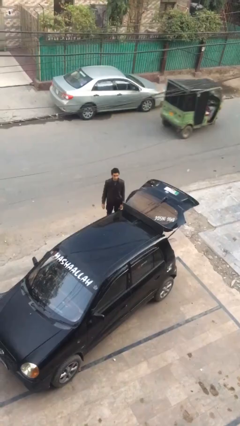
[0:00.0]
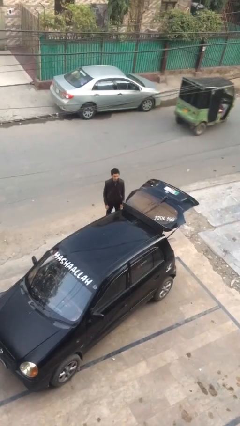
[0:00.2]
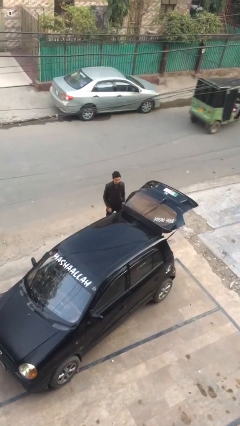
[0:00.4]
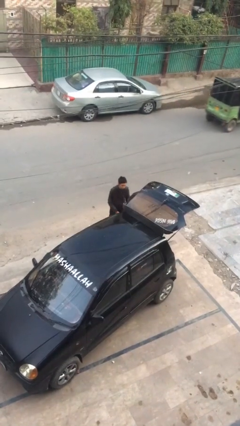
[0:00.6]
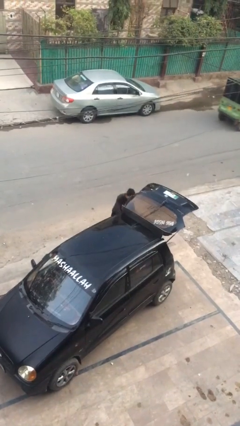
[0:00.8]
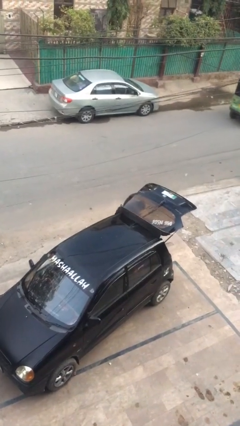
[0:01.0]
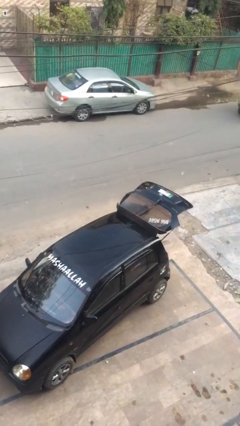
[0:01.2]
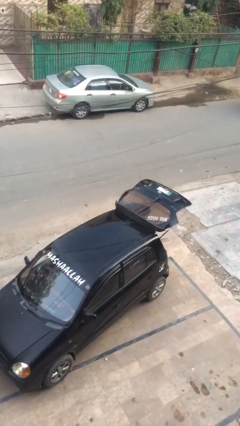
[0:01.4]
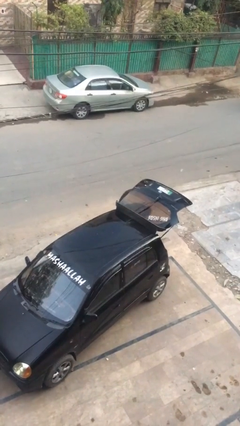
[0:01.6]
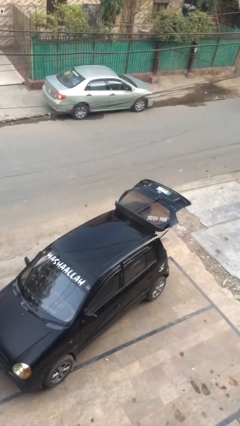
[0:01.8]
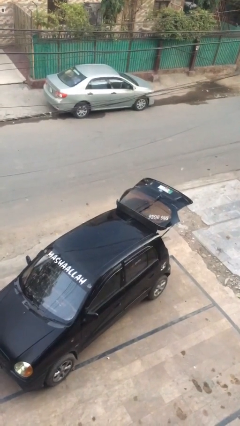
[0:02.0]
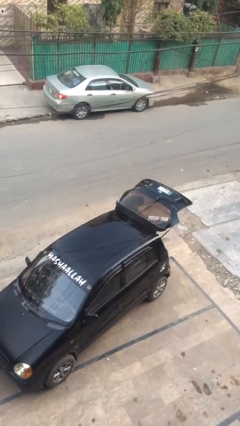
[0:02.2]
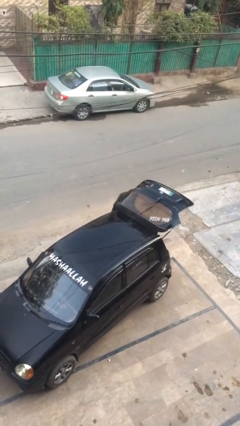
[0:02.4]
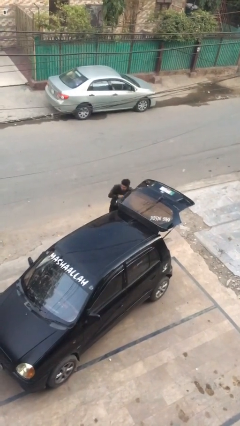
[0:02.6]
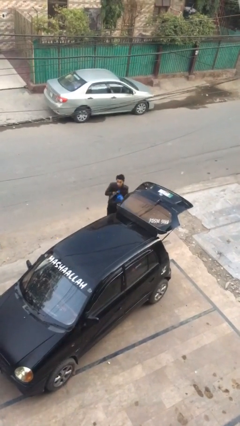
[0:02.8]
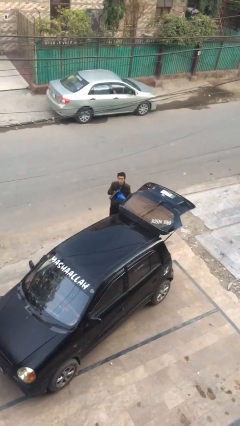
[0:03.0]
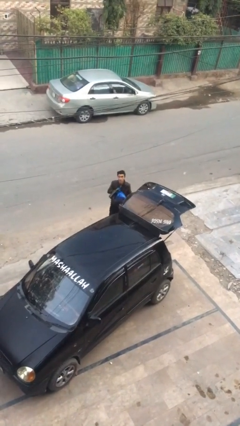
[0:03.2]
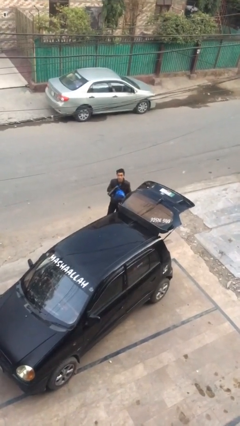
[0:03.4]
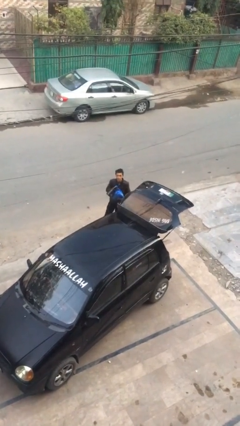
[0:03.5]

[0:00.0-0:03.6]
person unloads car

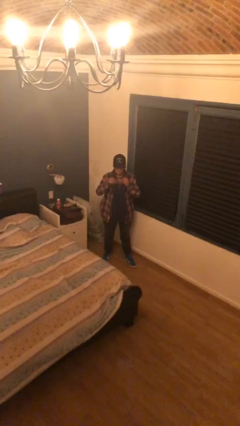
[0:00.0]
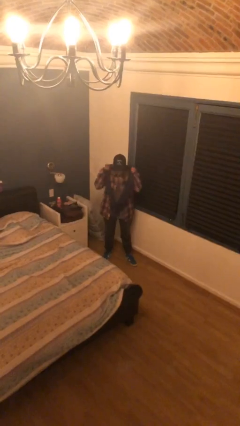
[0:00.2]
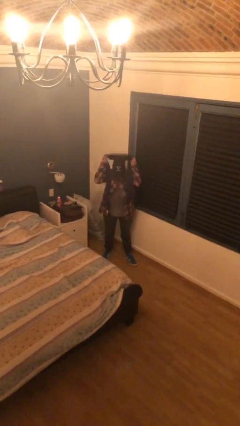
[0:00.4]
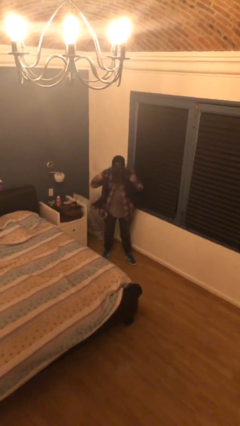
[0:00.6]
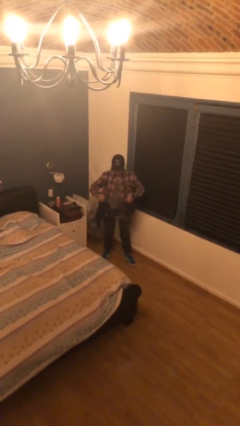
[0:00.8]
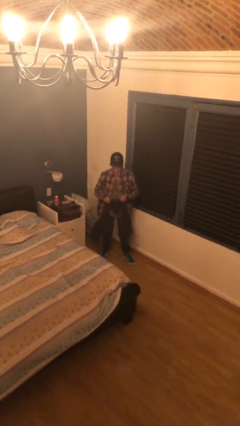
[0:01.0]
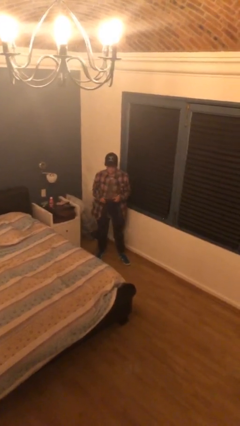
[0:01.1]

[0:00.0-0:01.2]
person takes off scarf

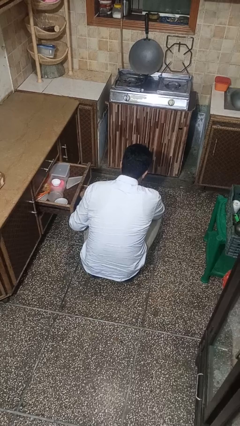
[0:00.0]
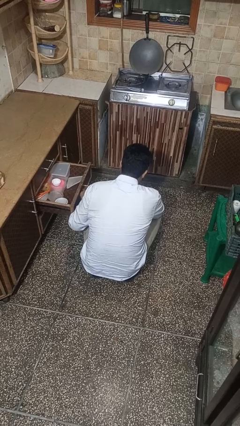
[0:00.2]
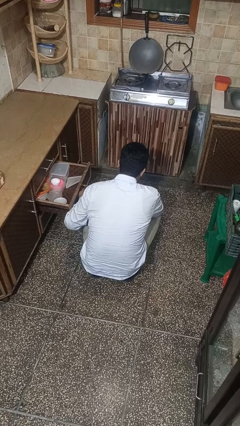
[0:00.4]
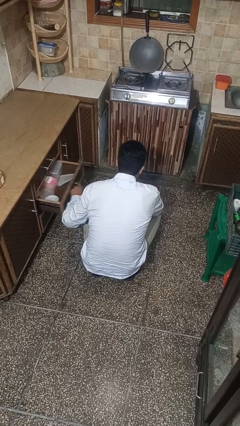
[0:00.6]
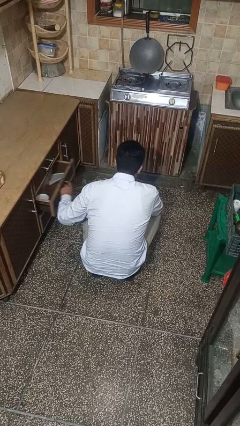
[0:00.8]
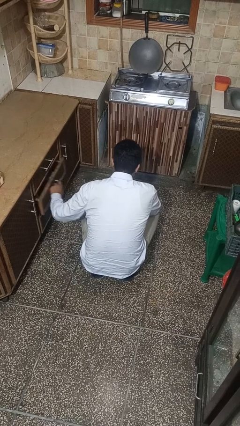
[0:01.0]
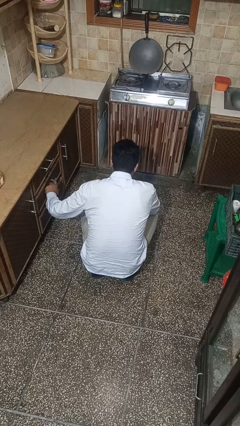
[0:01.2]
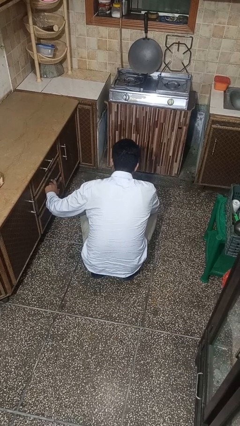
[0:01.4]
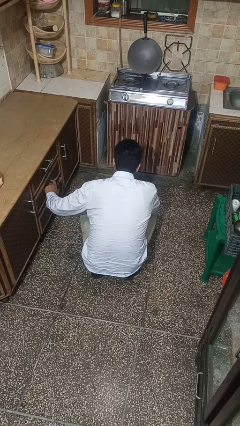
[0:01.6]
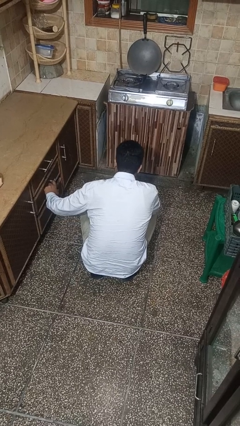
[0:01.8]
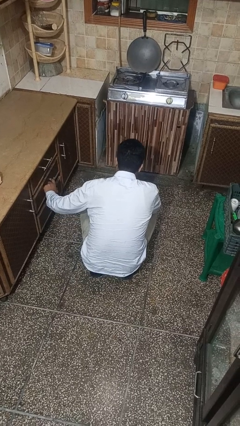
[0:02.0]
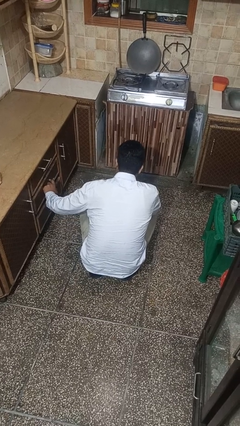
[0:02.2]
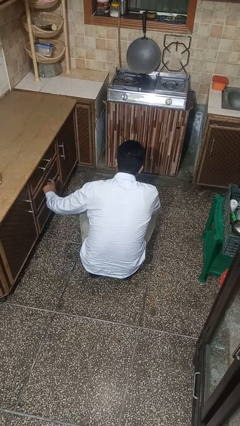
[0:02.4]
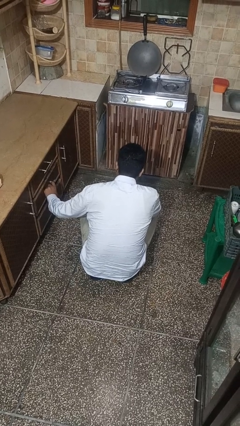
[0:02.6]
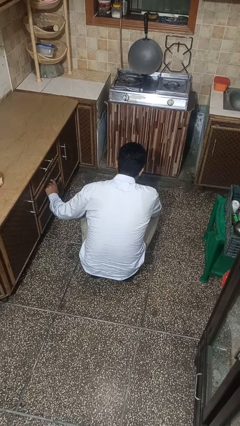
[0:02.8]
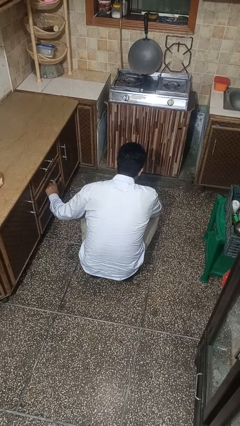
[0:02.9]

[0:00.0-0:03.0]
person closes kitchen drawer

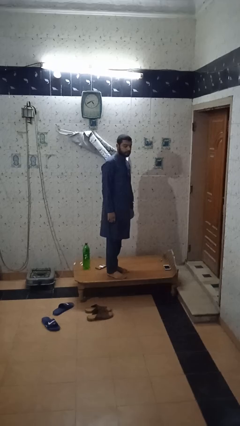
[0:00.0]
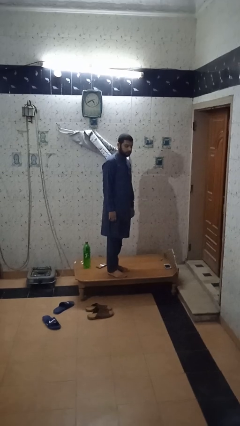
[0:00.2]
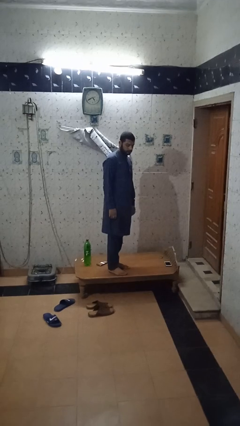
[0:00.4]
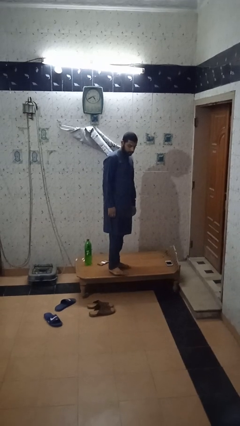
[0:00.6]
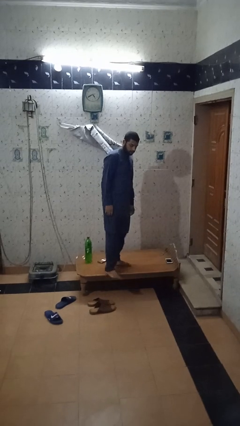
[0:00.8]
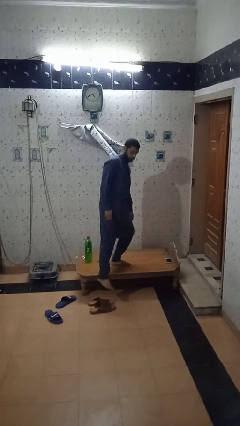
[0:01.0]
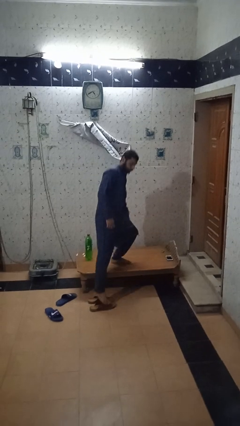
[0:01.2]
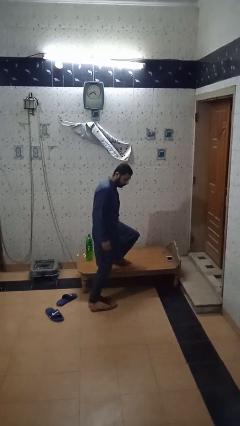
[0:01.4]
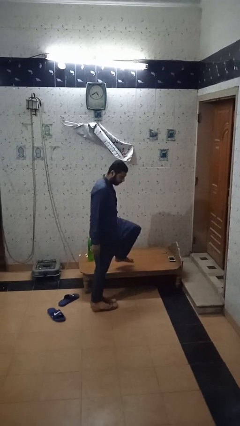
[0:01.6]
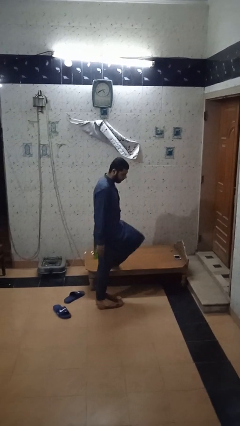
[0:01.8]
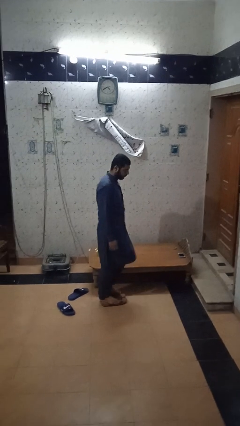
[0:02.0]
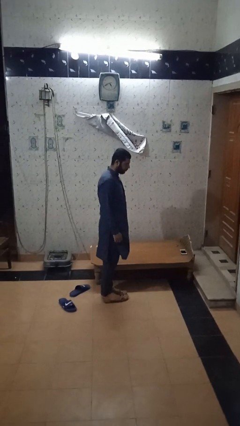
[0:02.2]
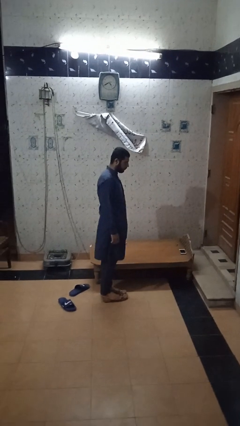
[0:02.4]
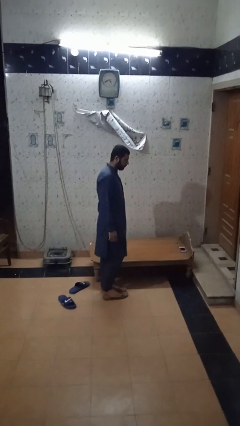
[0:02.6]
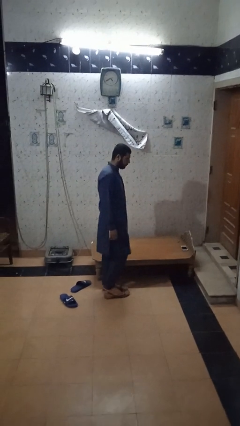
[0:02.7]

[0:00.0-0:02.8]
person climbs off table

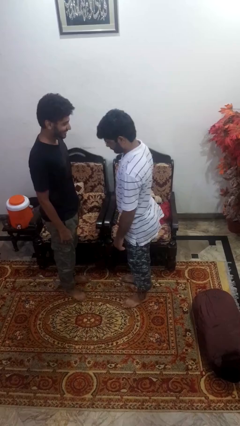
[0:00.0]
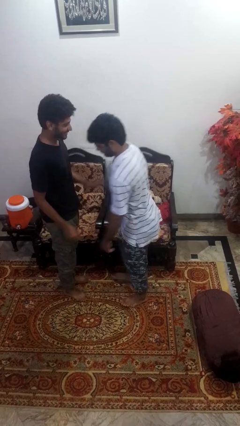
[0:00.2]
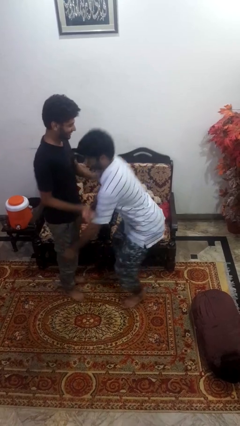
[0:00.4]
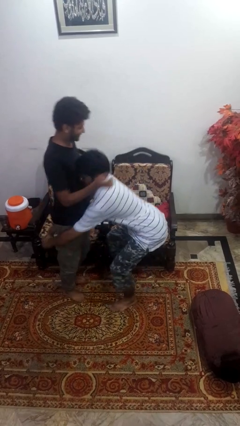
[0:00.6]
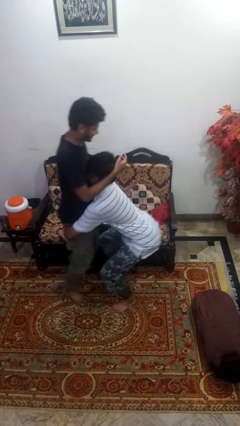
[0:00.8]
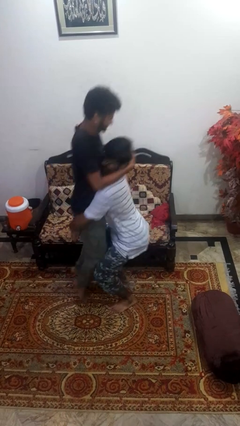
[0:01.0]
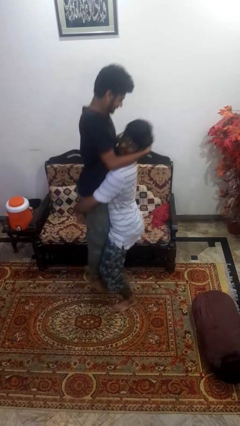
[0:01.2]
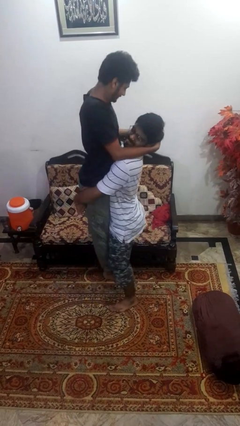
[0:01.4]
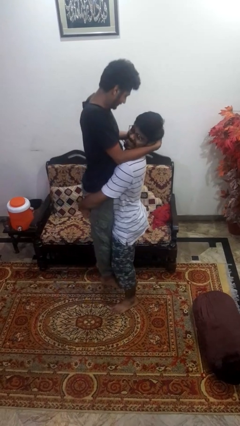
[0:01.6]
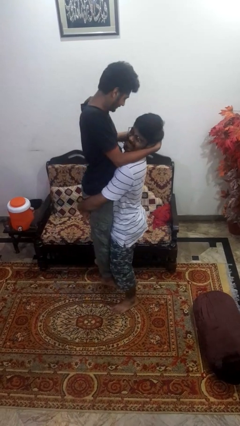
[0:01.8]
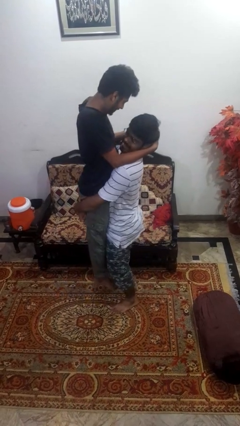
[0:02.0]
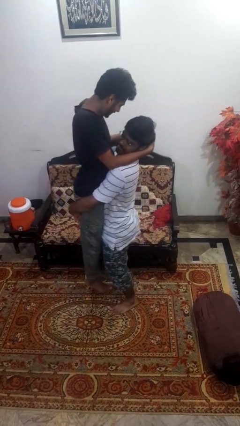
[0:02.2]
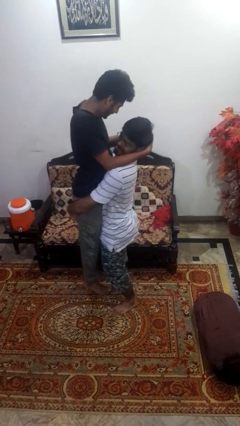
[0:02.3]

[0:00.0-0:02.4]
person picks up person

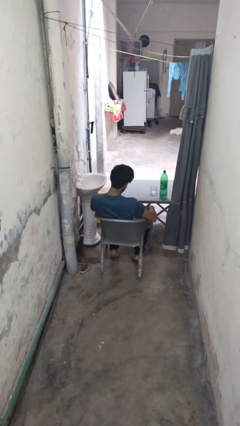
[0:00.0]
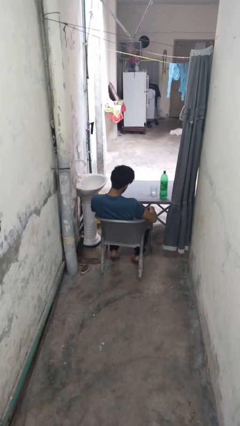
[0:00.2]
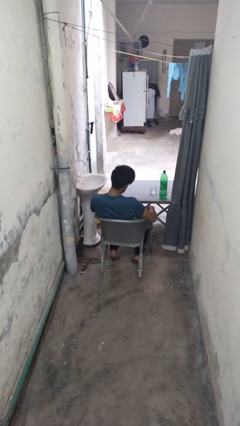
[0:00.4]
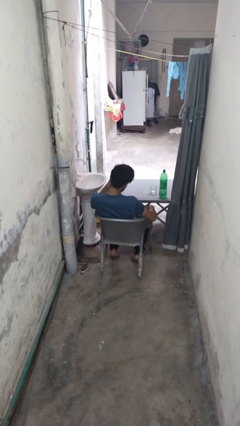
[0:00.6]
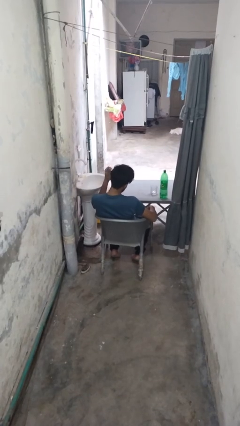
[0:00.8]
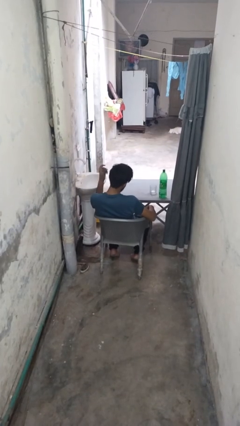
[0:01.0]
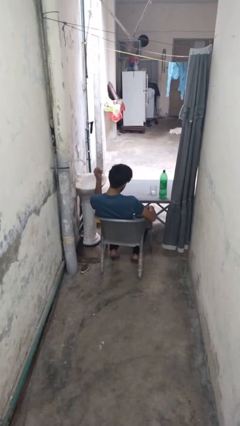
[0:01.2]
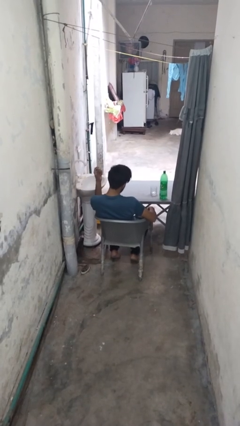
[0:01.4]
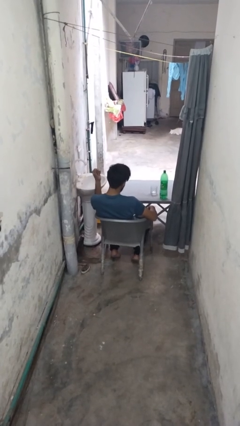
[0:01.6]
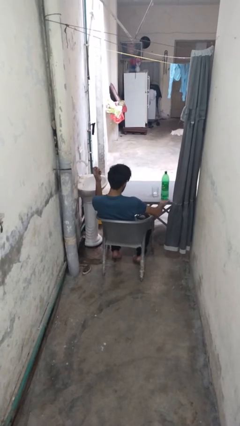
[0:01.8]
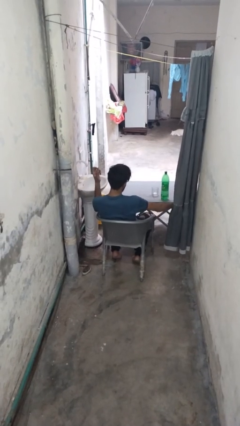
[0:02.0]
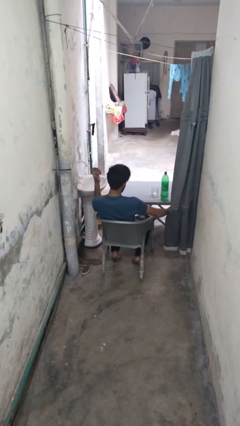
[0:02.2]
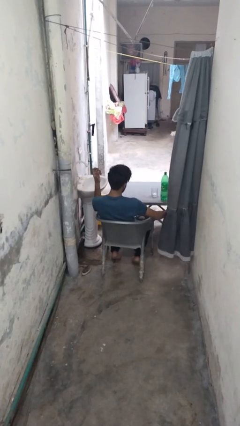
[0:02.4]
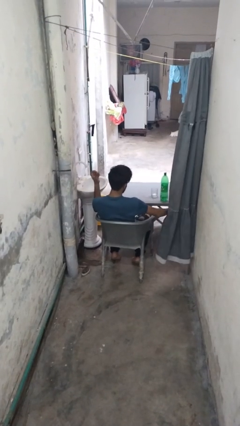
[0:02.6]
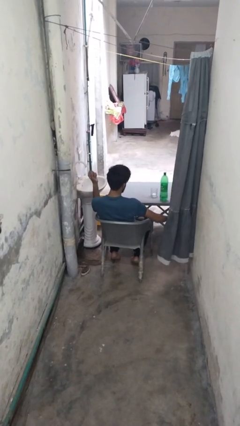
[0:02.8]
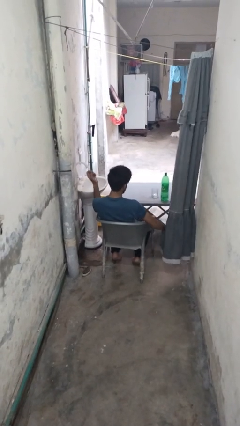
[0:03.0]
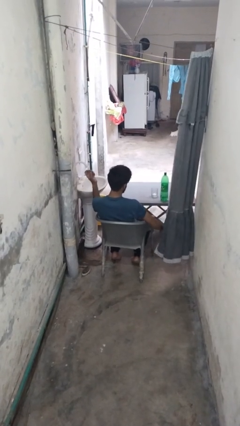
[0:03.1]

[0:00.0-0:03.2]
person snaps fingers

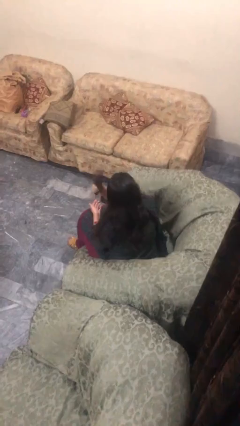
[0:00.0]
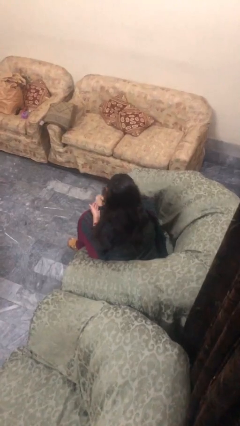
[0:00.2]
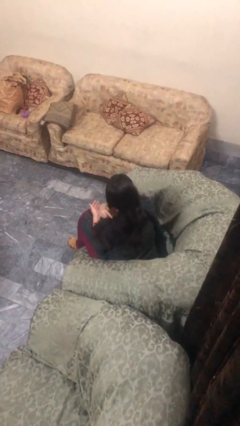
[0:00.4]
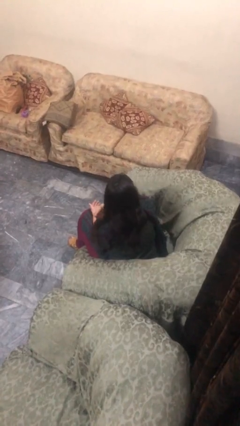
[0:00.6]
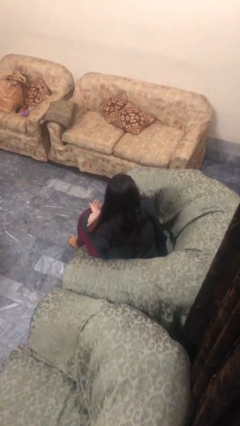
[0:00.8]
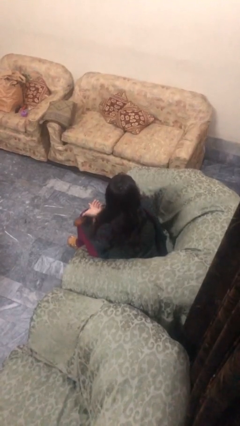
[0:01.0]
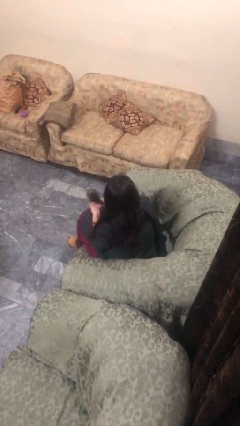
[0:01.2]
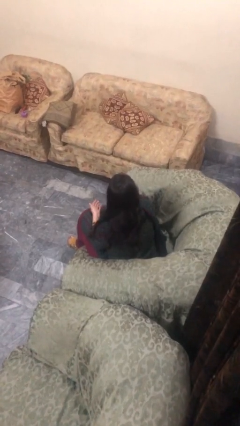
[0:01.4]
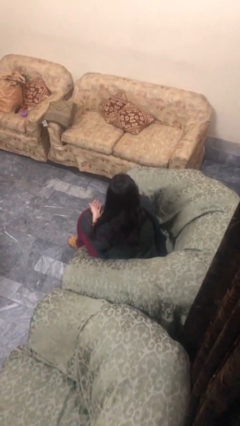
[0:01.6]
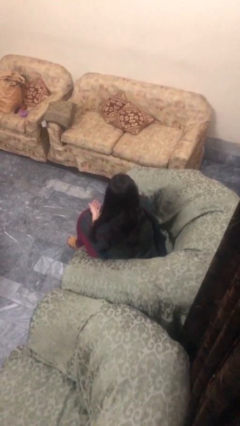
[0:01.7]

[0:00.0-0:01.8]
person brushes hair
